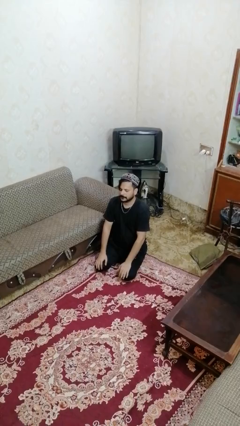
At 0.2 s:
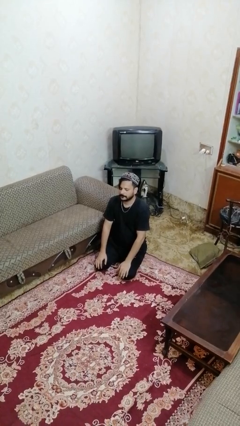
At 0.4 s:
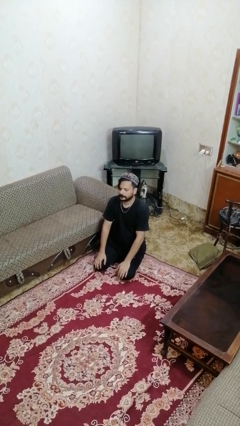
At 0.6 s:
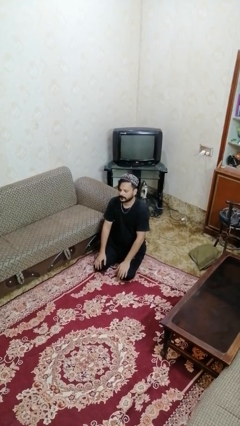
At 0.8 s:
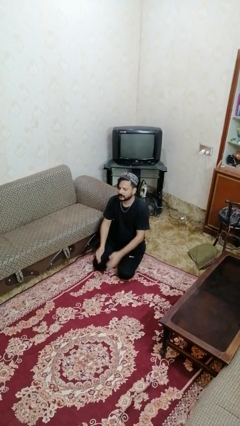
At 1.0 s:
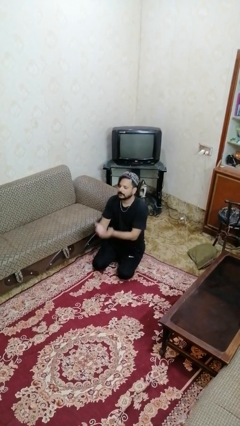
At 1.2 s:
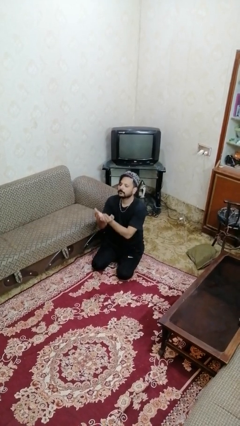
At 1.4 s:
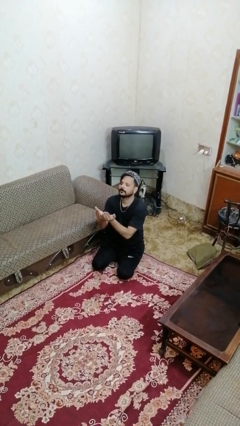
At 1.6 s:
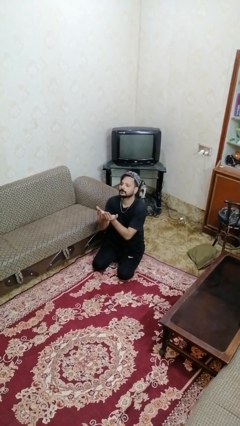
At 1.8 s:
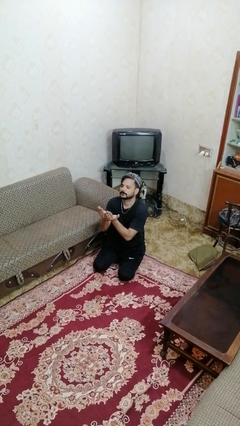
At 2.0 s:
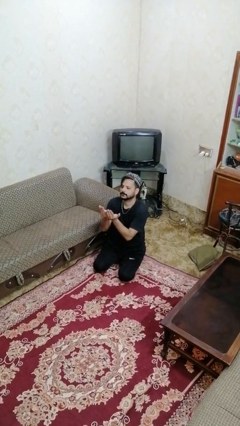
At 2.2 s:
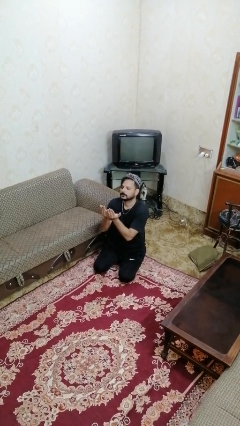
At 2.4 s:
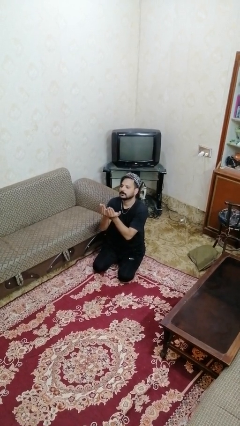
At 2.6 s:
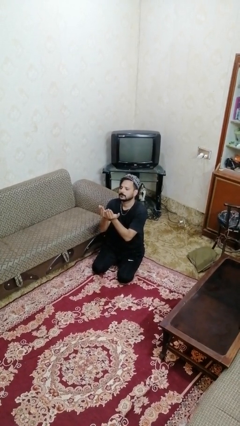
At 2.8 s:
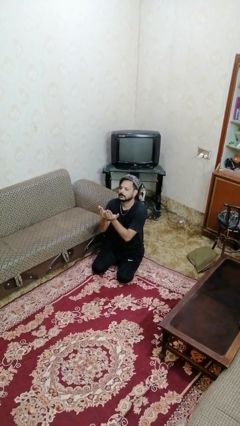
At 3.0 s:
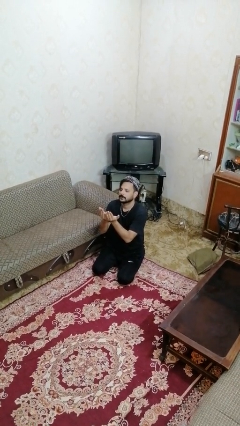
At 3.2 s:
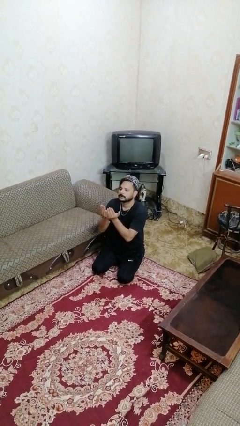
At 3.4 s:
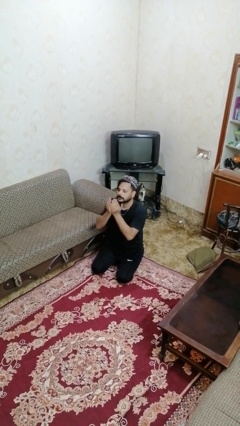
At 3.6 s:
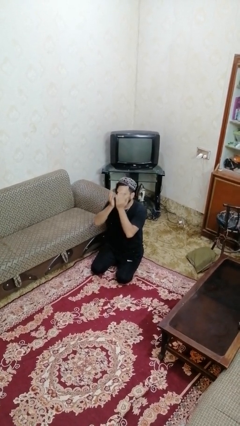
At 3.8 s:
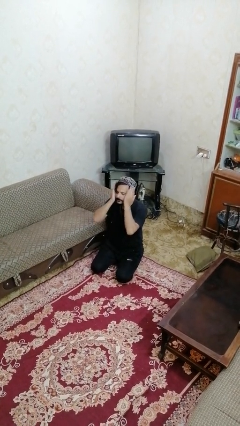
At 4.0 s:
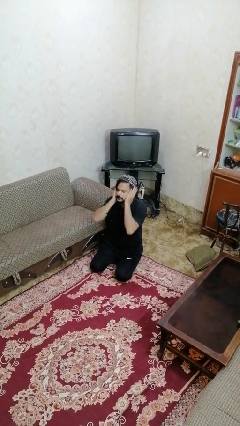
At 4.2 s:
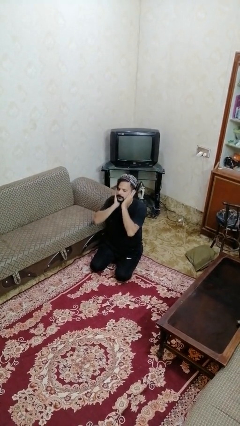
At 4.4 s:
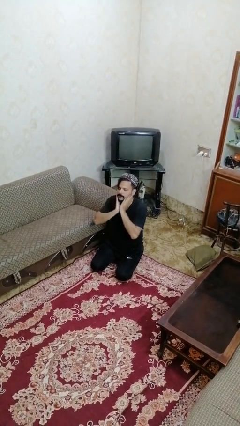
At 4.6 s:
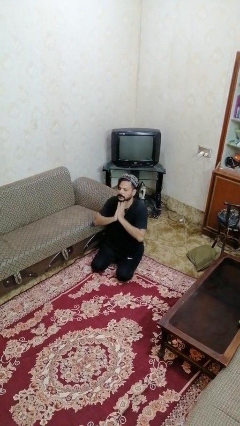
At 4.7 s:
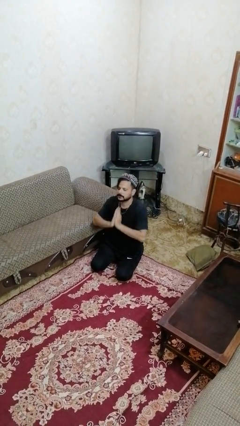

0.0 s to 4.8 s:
person prays

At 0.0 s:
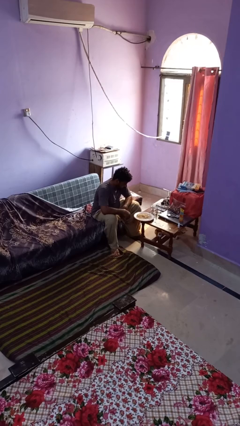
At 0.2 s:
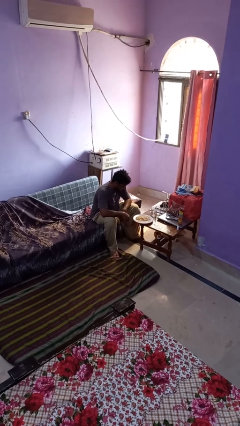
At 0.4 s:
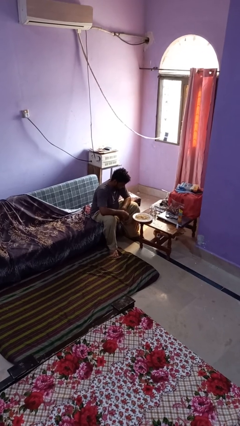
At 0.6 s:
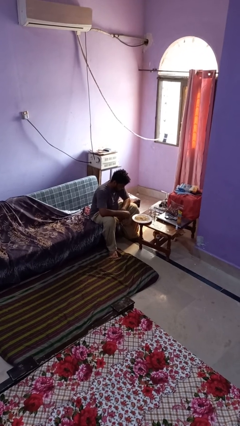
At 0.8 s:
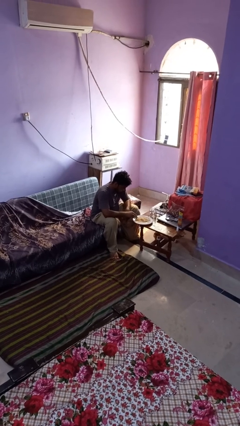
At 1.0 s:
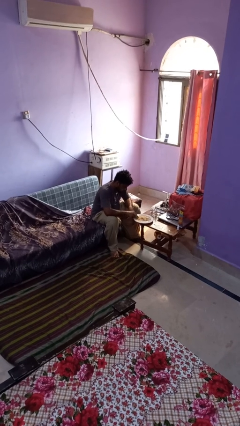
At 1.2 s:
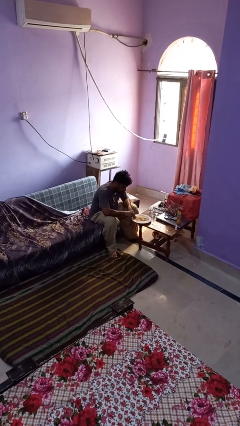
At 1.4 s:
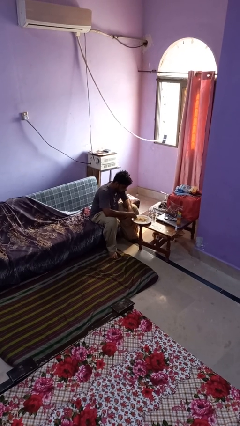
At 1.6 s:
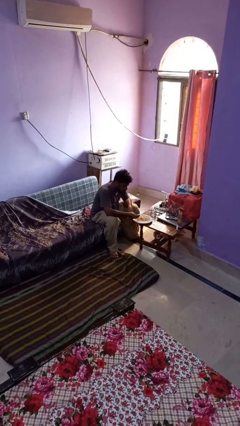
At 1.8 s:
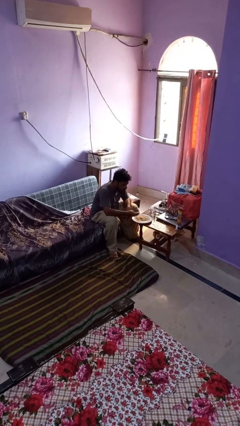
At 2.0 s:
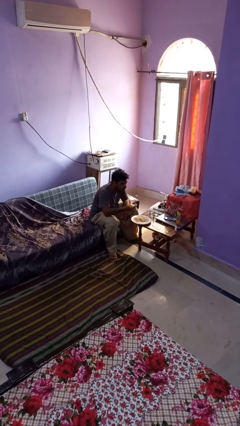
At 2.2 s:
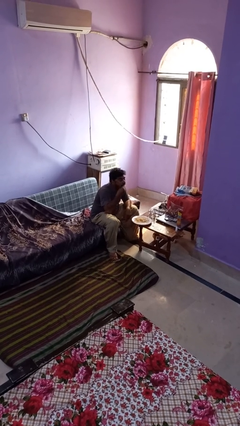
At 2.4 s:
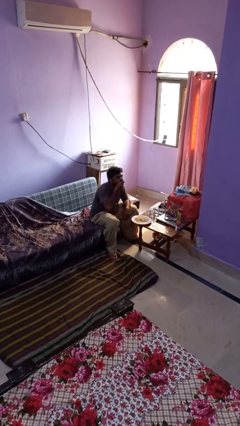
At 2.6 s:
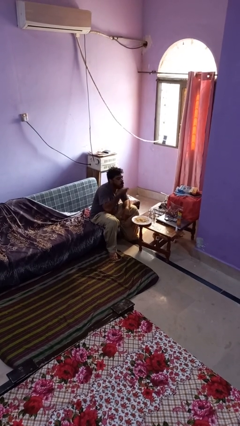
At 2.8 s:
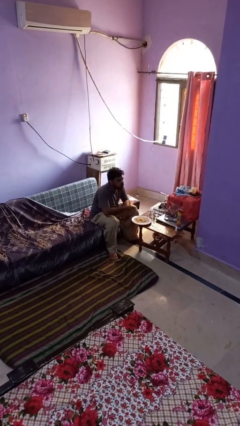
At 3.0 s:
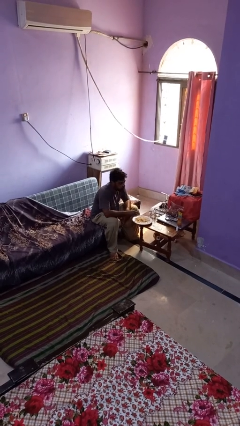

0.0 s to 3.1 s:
person eats with hands

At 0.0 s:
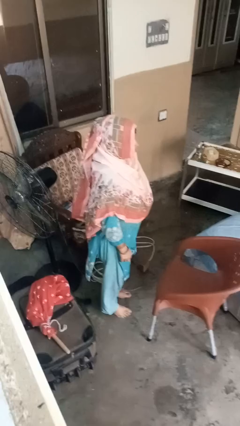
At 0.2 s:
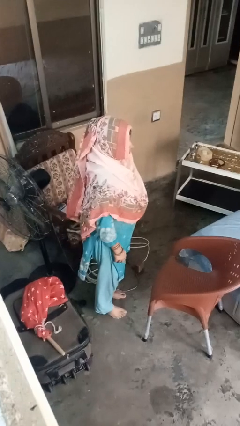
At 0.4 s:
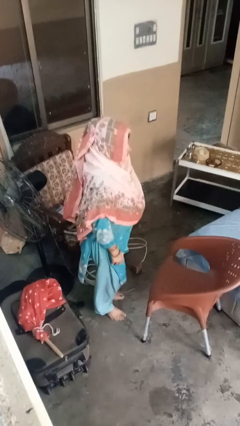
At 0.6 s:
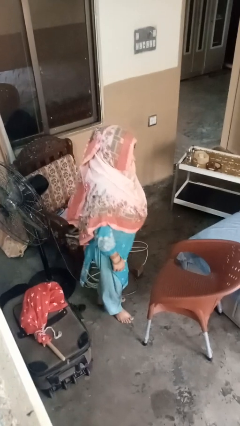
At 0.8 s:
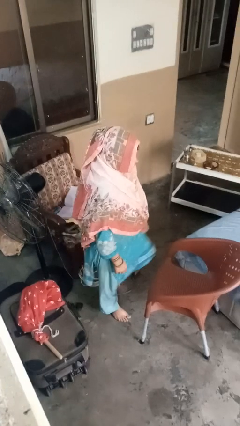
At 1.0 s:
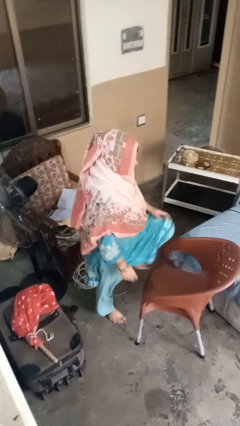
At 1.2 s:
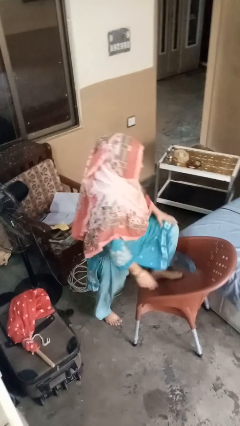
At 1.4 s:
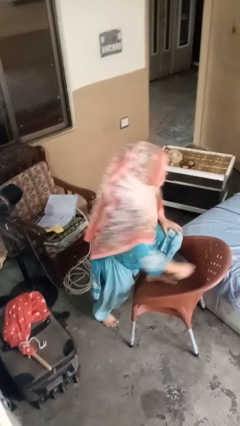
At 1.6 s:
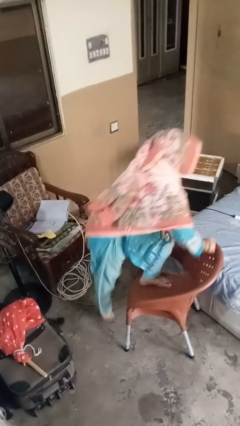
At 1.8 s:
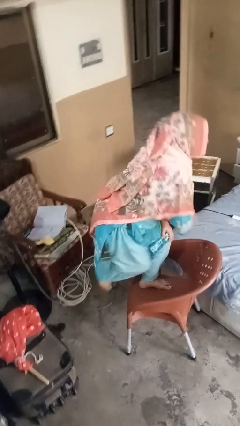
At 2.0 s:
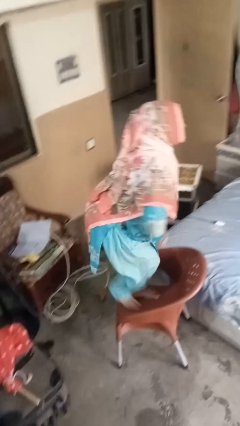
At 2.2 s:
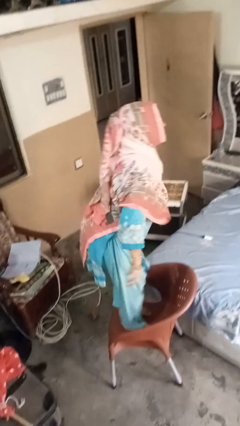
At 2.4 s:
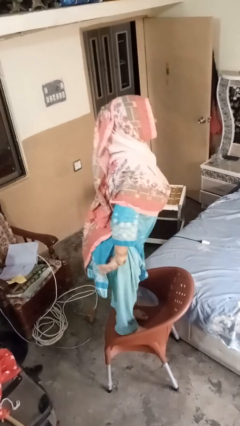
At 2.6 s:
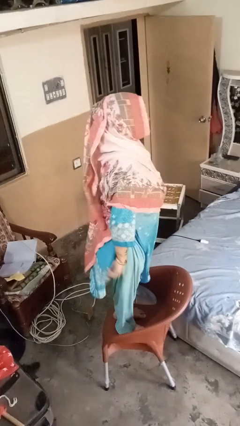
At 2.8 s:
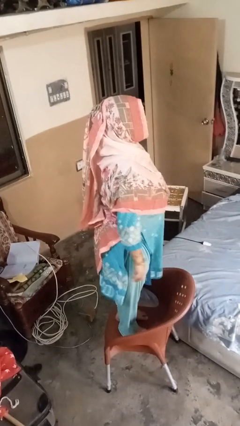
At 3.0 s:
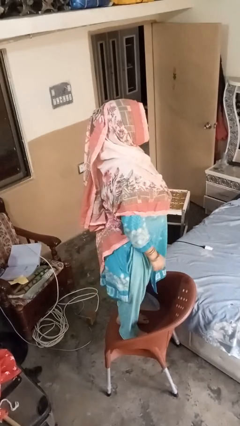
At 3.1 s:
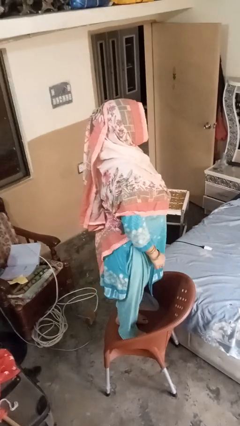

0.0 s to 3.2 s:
person climbs on chair

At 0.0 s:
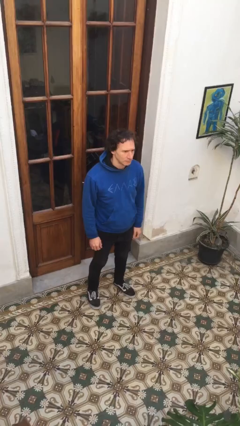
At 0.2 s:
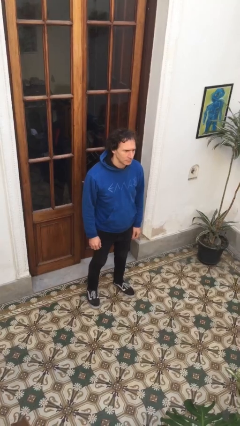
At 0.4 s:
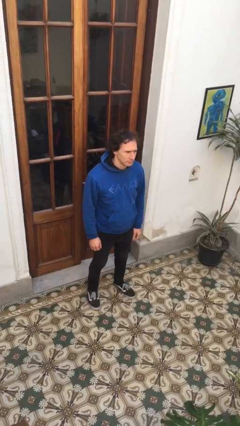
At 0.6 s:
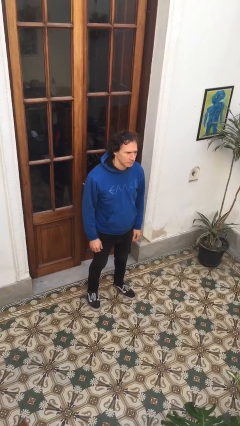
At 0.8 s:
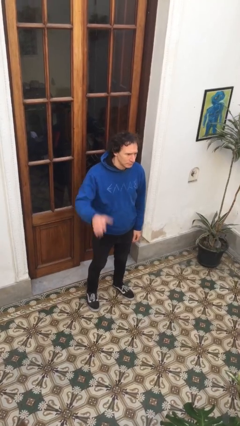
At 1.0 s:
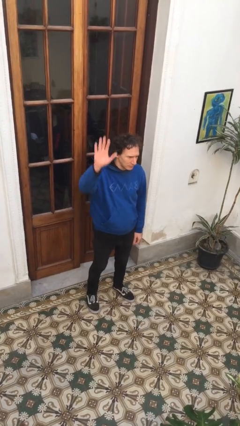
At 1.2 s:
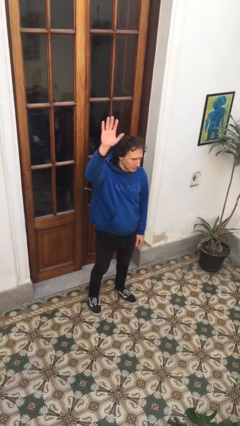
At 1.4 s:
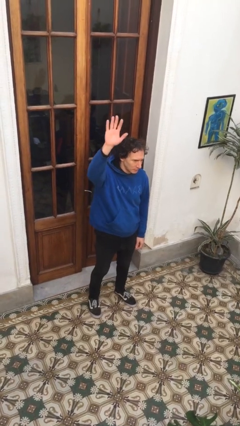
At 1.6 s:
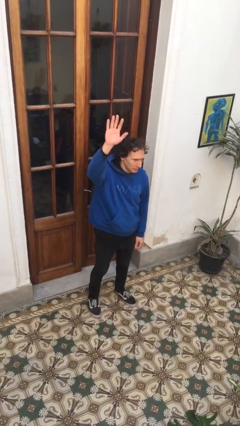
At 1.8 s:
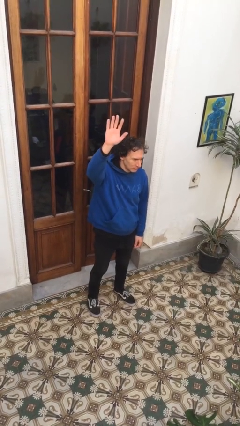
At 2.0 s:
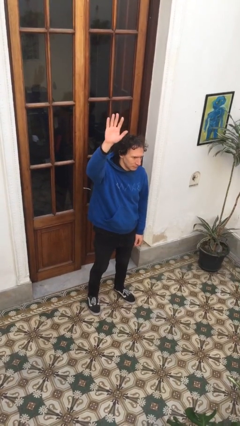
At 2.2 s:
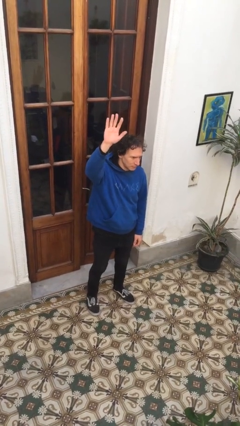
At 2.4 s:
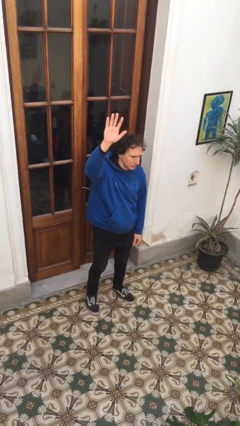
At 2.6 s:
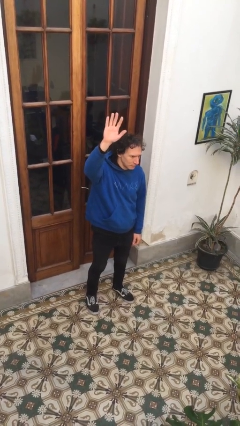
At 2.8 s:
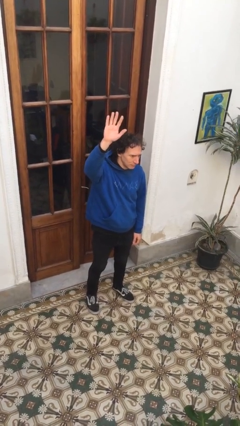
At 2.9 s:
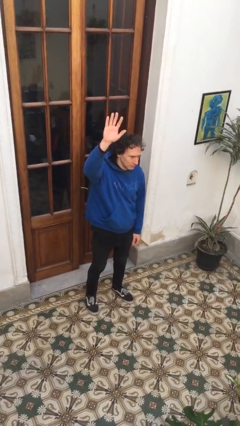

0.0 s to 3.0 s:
person gestures raise hand

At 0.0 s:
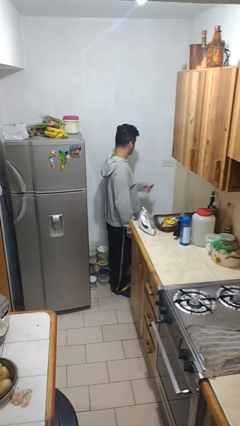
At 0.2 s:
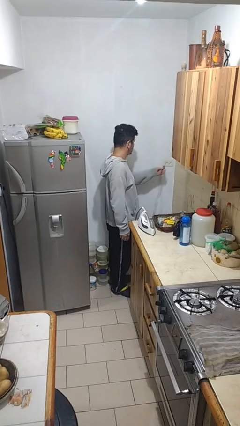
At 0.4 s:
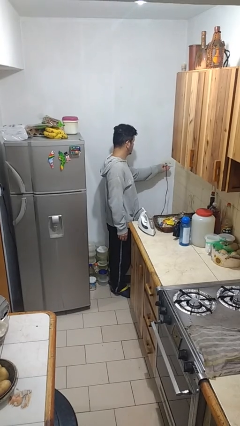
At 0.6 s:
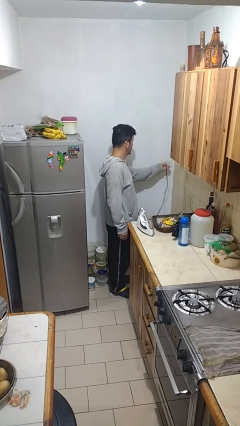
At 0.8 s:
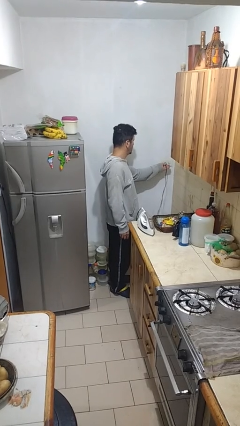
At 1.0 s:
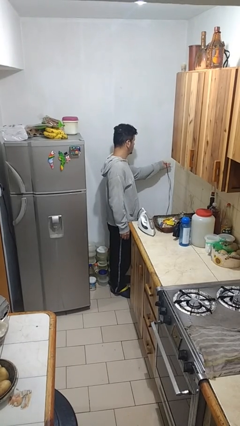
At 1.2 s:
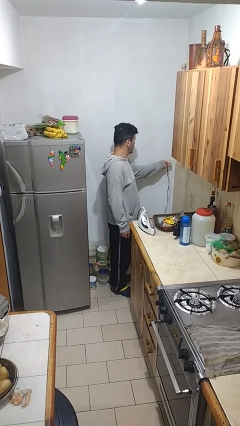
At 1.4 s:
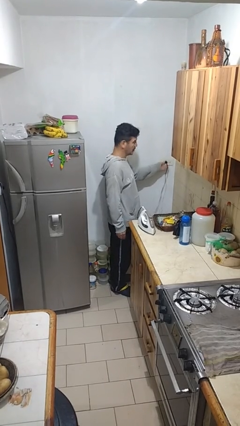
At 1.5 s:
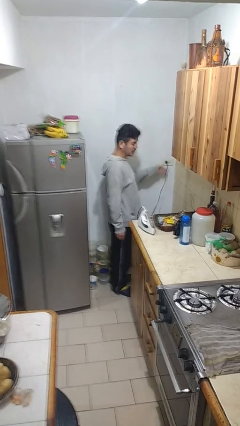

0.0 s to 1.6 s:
person plugs into electrical socket

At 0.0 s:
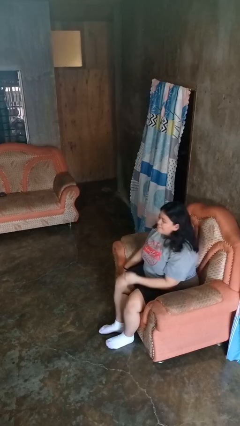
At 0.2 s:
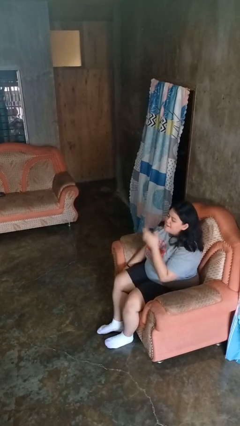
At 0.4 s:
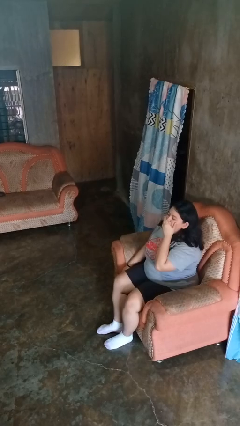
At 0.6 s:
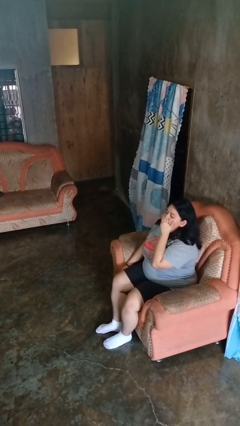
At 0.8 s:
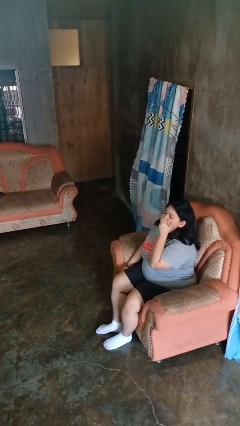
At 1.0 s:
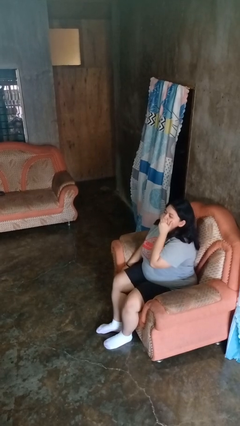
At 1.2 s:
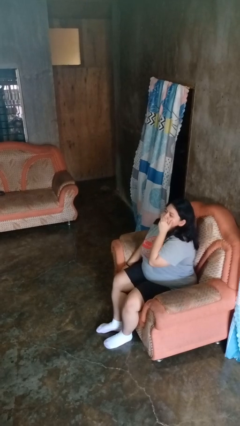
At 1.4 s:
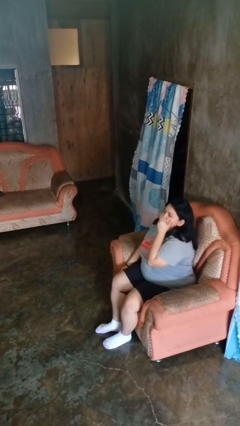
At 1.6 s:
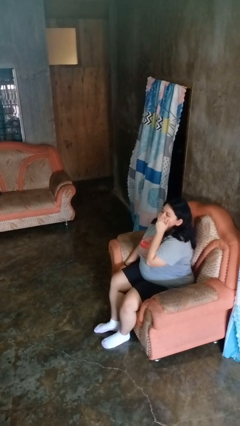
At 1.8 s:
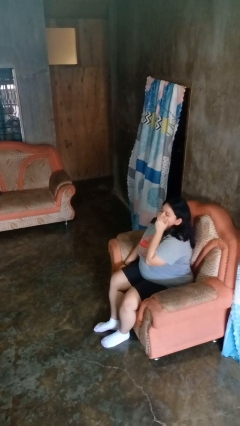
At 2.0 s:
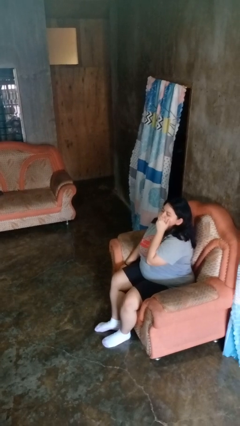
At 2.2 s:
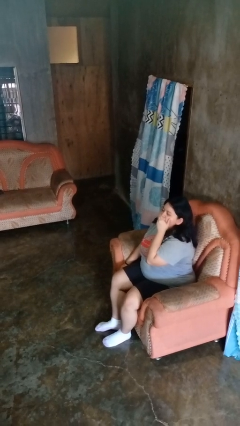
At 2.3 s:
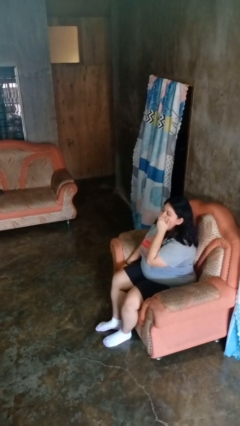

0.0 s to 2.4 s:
person yawns
